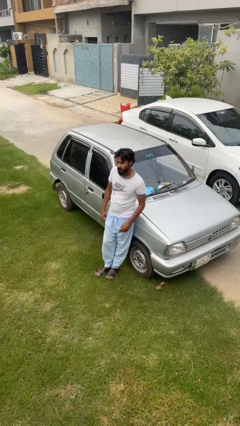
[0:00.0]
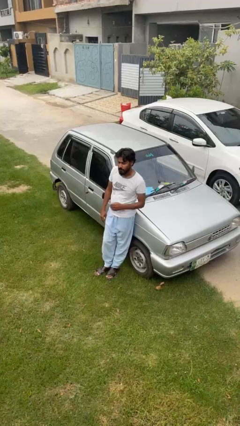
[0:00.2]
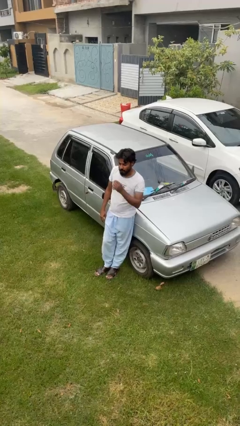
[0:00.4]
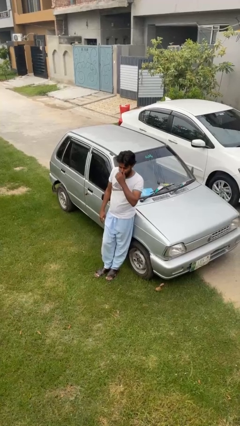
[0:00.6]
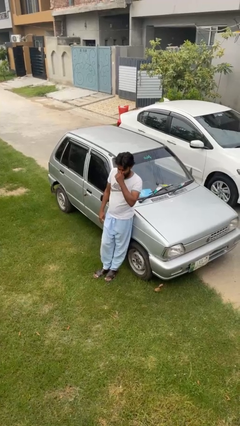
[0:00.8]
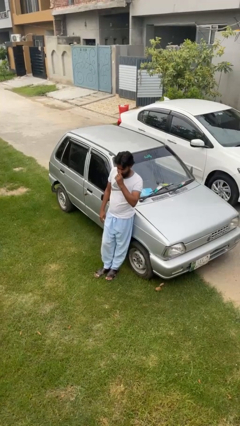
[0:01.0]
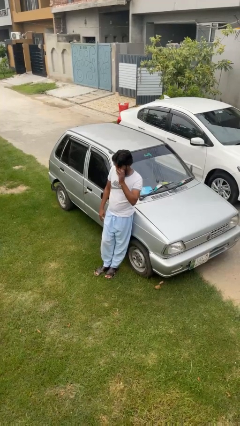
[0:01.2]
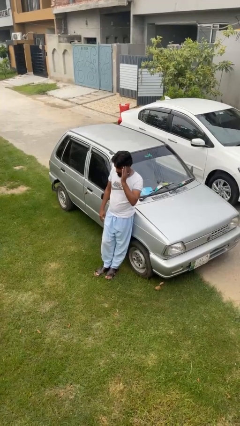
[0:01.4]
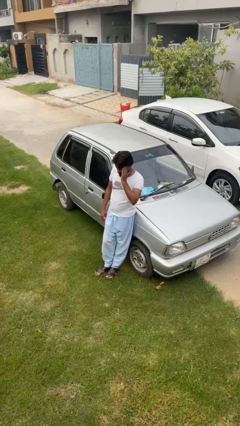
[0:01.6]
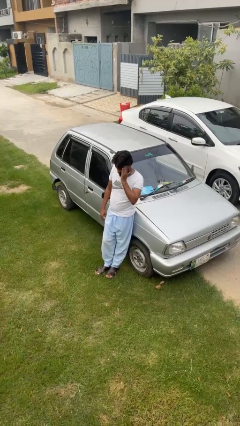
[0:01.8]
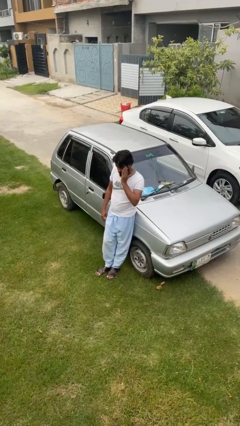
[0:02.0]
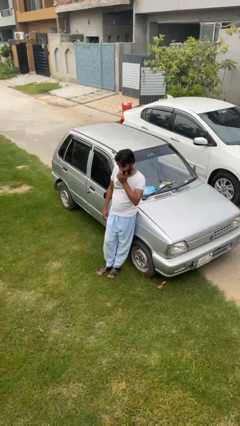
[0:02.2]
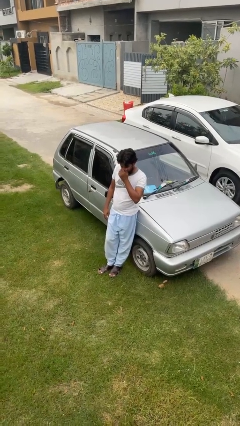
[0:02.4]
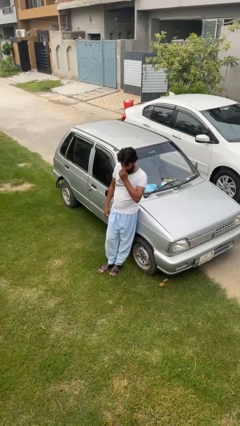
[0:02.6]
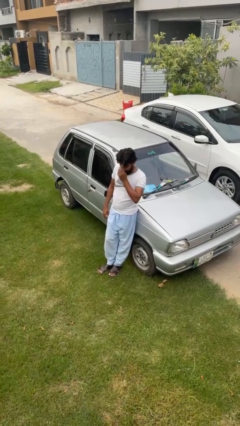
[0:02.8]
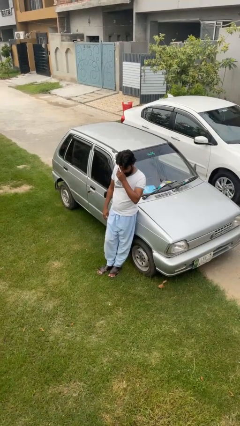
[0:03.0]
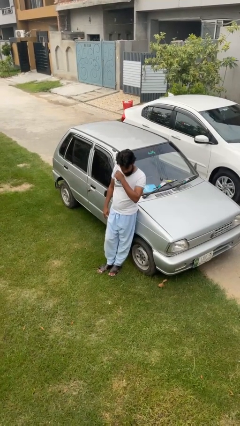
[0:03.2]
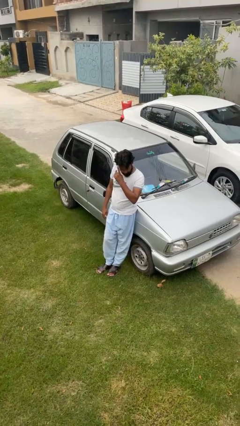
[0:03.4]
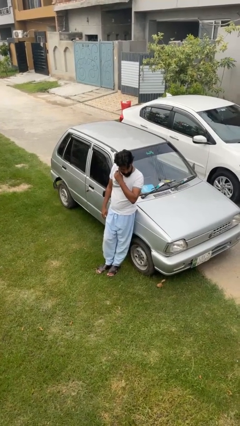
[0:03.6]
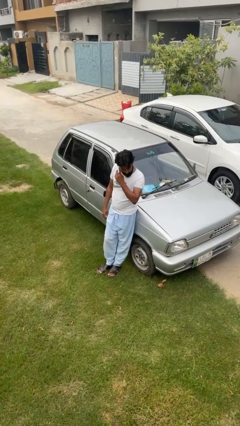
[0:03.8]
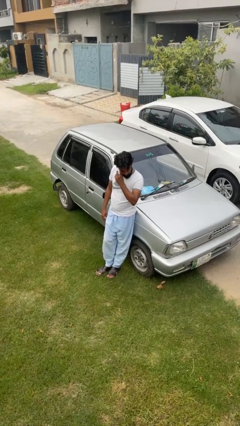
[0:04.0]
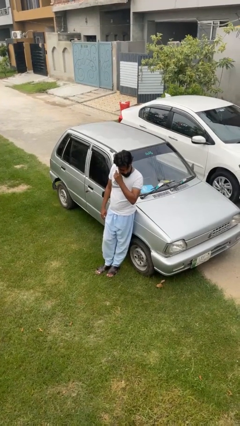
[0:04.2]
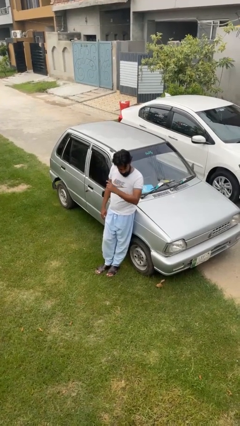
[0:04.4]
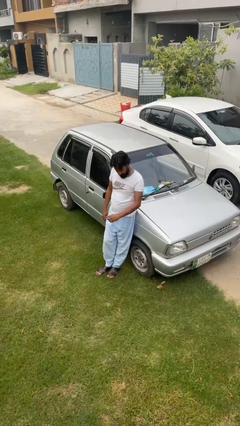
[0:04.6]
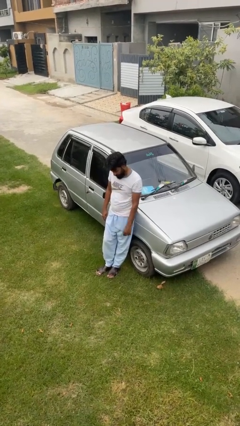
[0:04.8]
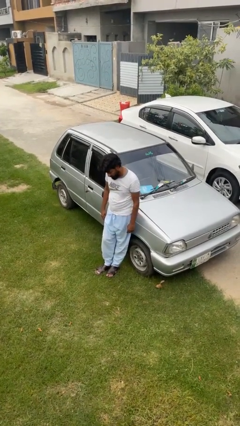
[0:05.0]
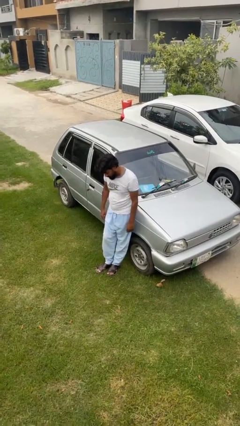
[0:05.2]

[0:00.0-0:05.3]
person scratches face

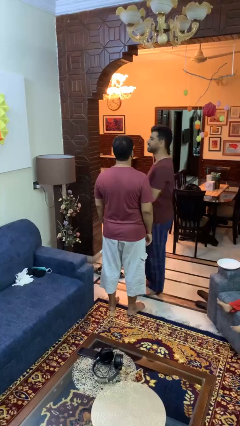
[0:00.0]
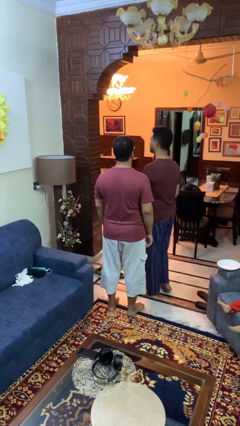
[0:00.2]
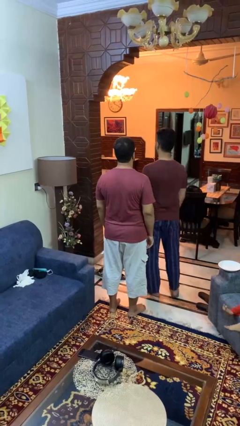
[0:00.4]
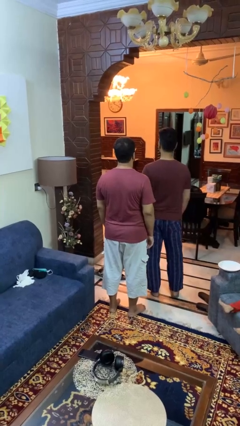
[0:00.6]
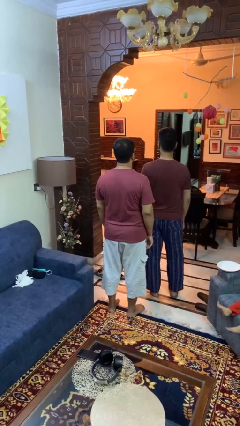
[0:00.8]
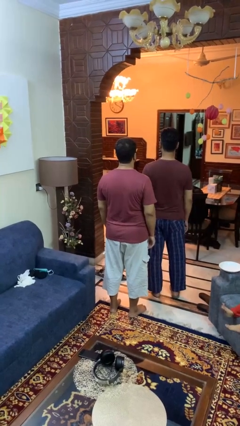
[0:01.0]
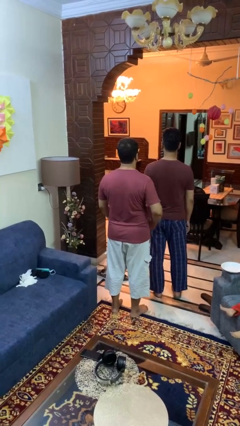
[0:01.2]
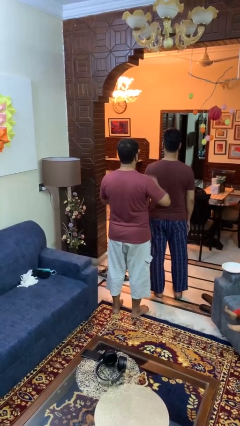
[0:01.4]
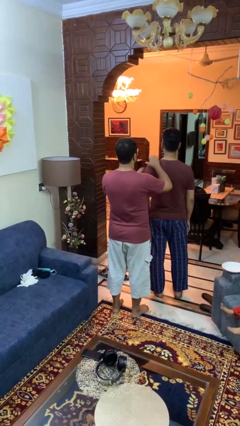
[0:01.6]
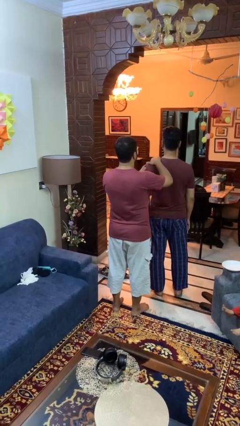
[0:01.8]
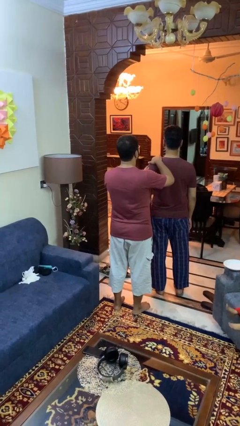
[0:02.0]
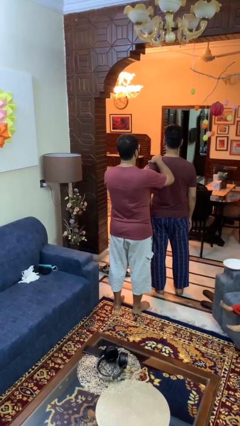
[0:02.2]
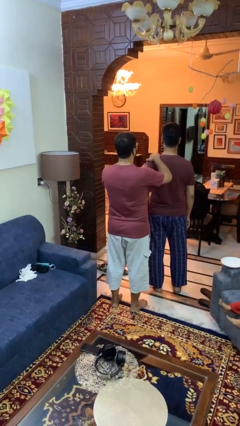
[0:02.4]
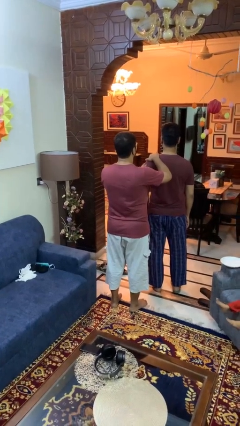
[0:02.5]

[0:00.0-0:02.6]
person grabs person by shoulder

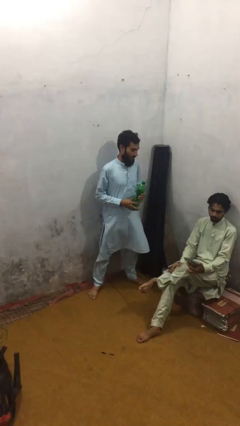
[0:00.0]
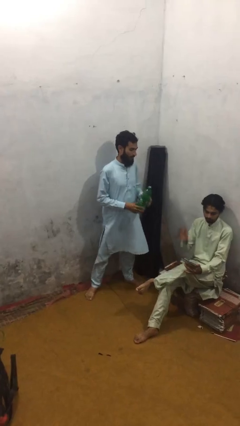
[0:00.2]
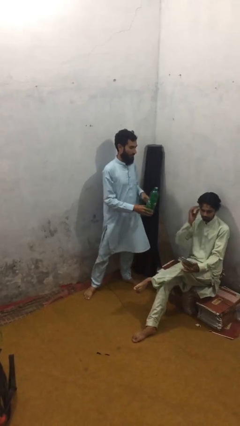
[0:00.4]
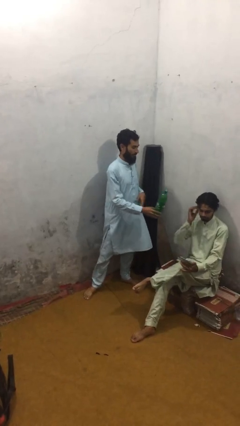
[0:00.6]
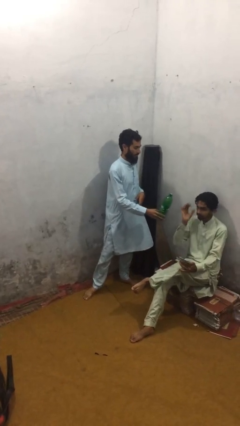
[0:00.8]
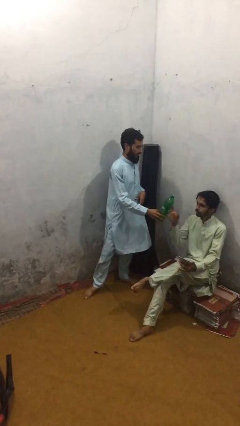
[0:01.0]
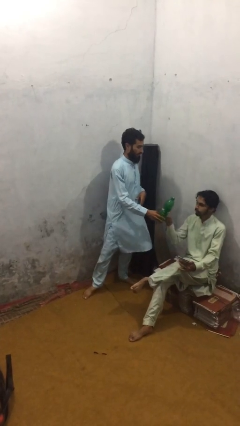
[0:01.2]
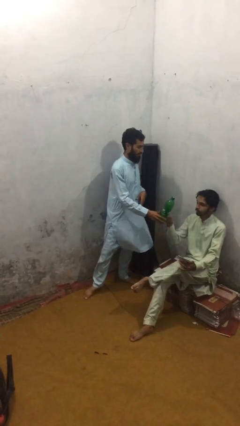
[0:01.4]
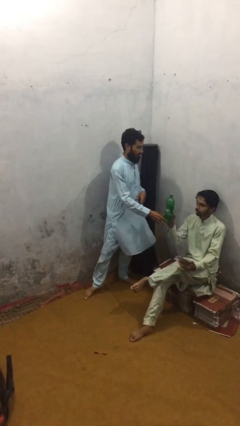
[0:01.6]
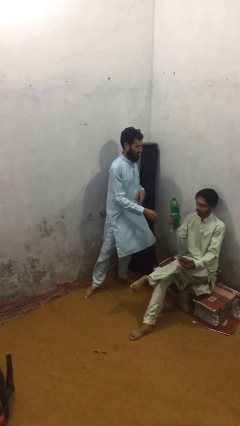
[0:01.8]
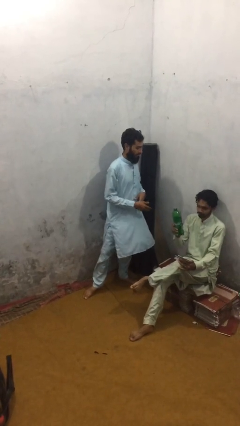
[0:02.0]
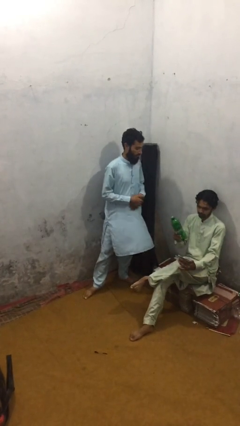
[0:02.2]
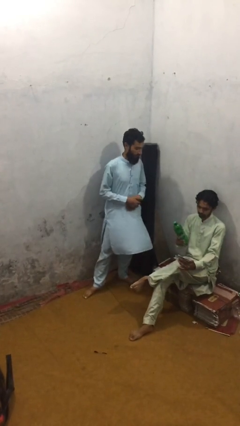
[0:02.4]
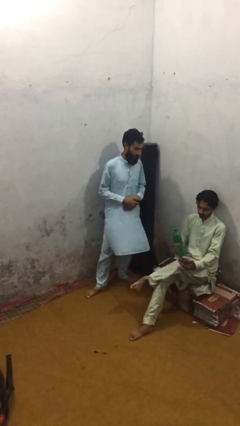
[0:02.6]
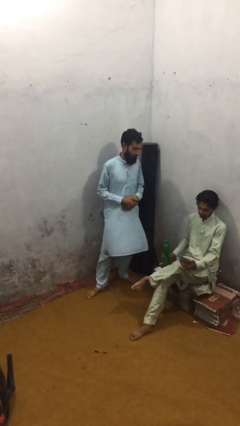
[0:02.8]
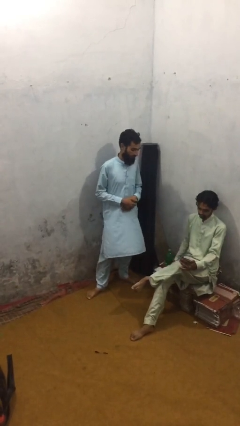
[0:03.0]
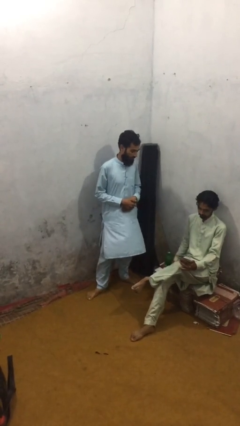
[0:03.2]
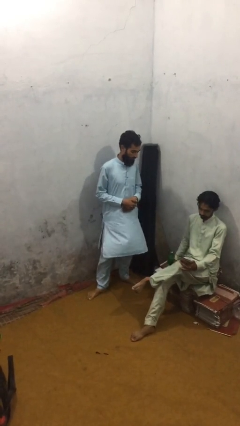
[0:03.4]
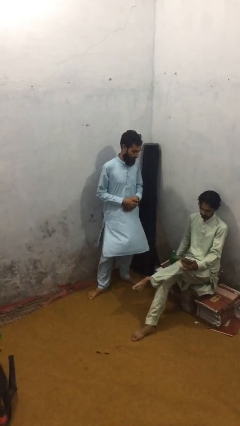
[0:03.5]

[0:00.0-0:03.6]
person transfers object to person

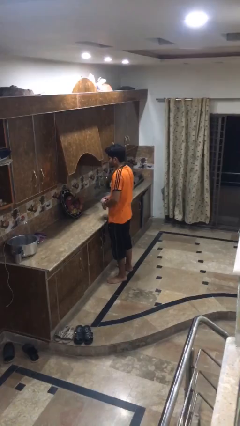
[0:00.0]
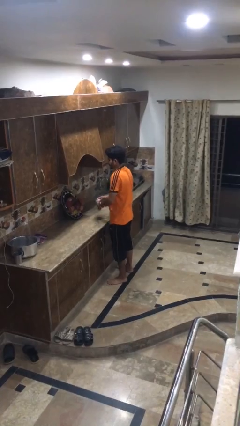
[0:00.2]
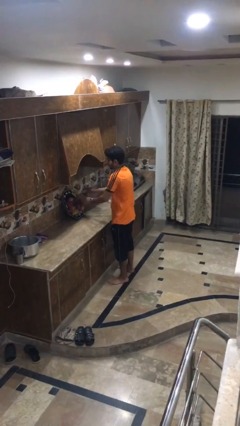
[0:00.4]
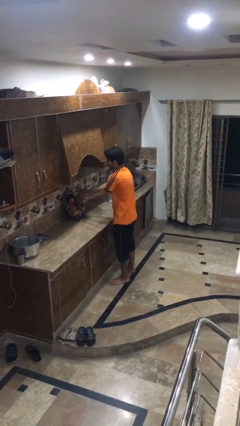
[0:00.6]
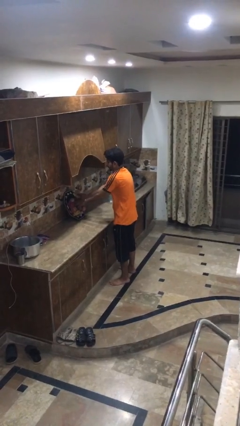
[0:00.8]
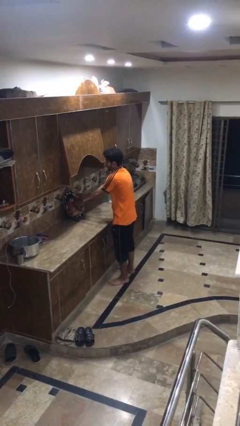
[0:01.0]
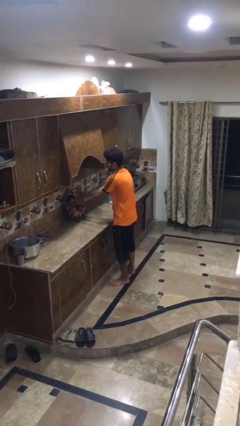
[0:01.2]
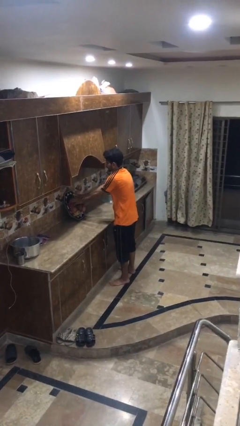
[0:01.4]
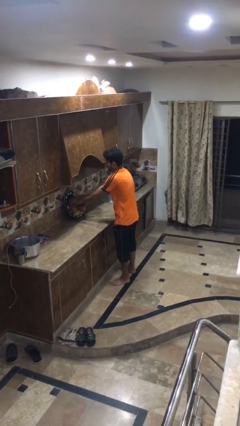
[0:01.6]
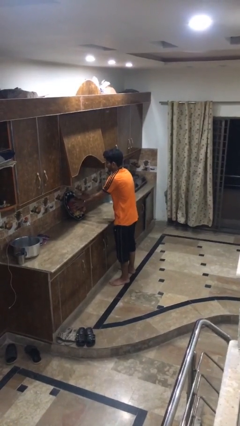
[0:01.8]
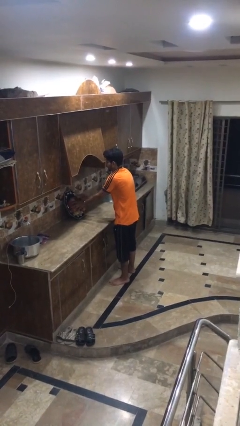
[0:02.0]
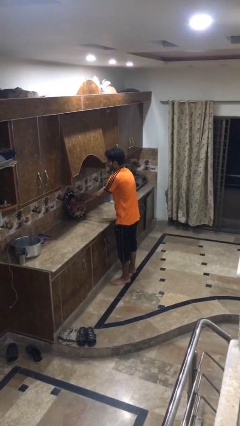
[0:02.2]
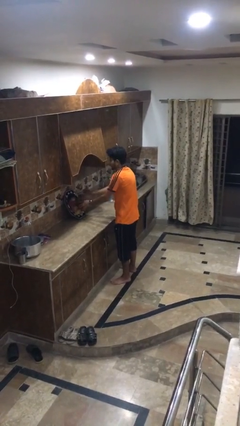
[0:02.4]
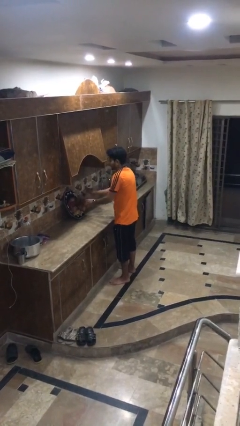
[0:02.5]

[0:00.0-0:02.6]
person arranges flowers in vase

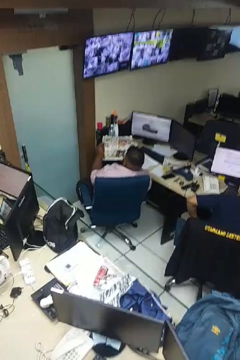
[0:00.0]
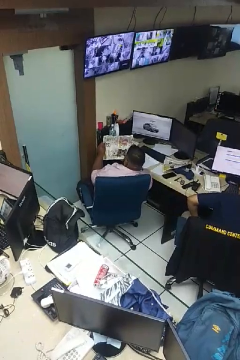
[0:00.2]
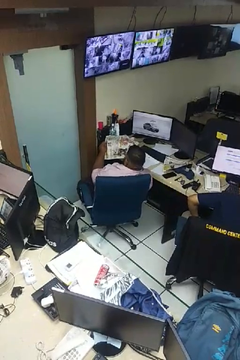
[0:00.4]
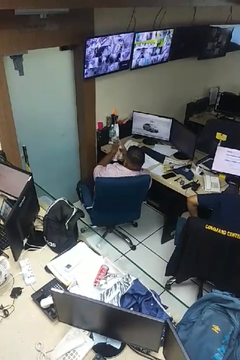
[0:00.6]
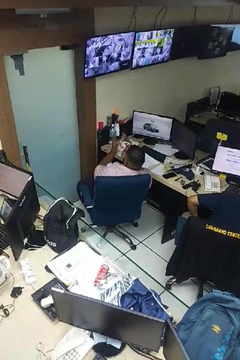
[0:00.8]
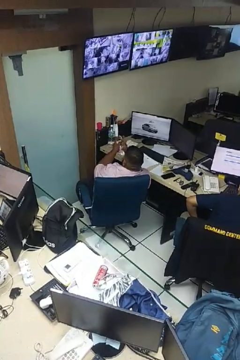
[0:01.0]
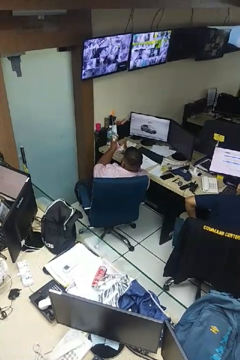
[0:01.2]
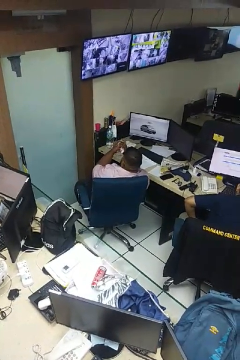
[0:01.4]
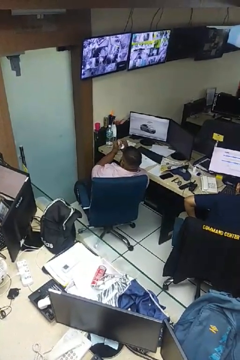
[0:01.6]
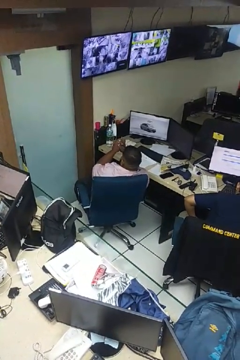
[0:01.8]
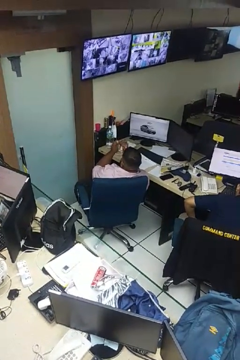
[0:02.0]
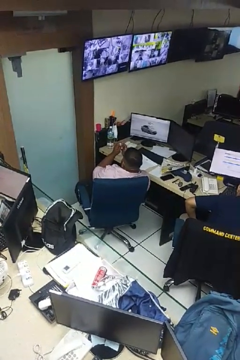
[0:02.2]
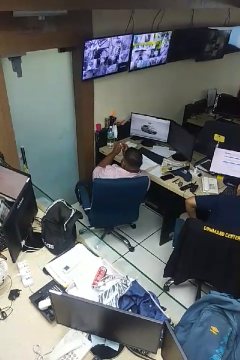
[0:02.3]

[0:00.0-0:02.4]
person crumples paper

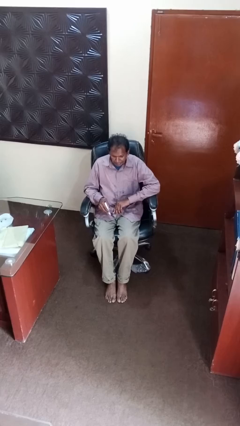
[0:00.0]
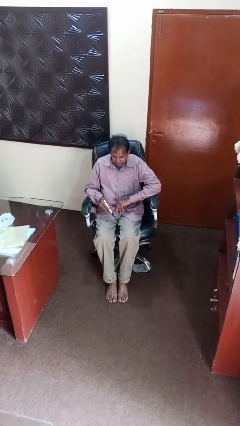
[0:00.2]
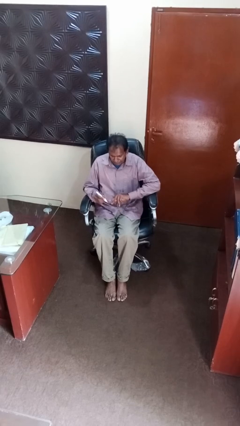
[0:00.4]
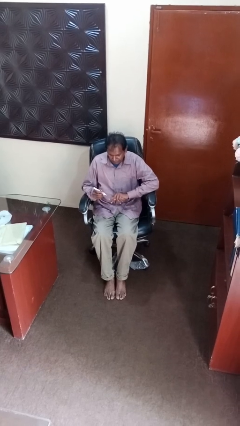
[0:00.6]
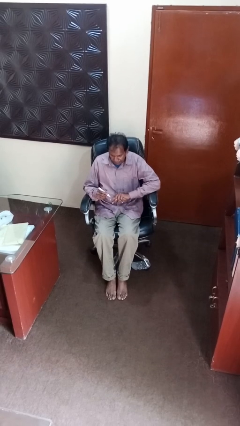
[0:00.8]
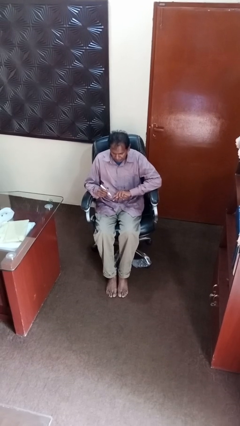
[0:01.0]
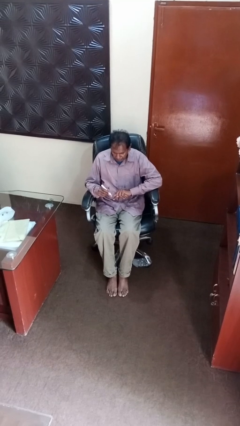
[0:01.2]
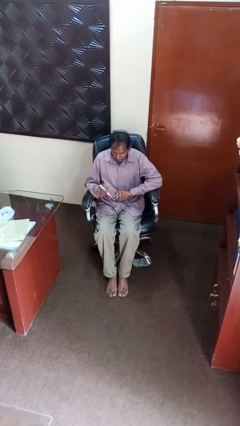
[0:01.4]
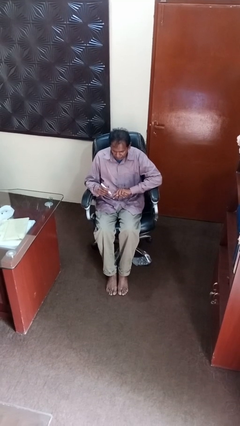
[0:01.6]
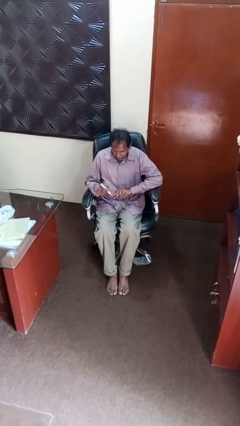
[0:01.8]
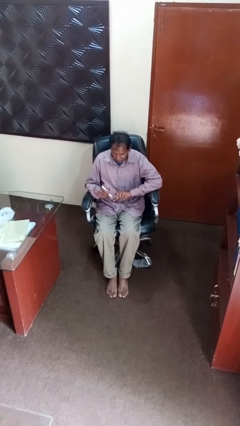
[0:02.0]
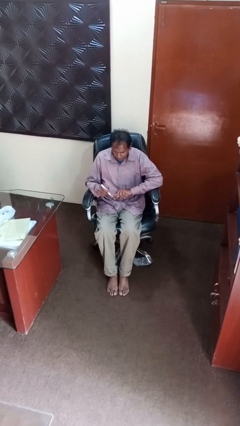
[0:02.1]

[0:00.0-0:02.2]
person paints fingernails
